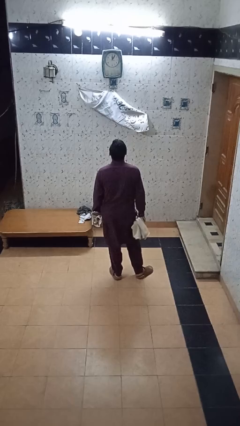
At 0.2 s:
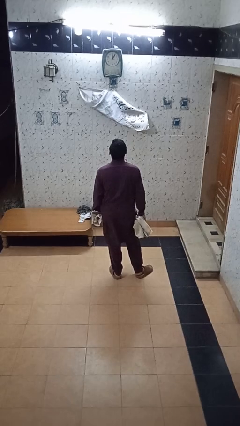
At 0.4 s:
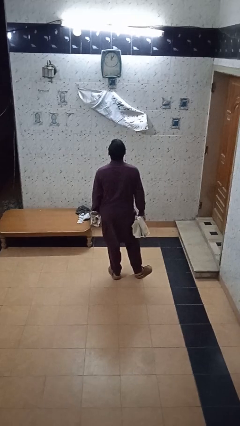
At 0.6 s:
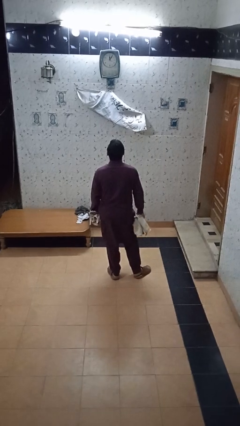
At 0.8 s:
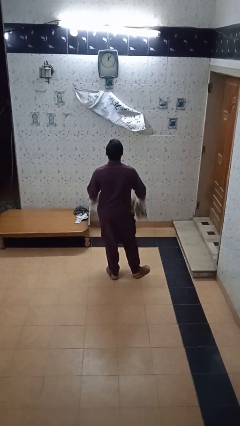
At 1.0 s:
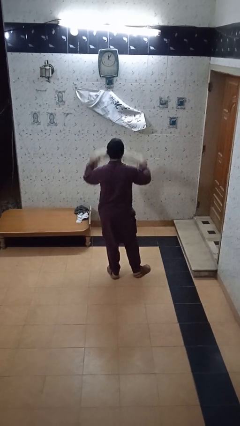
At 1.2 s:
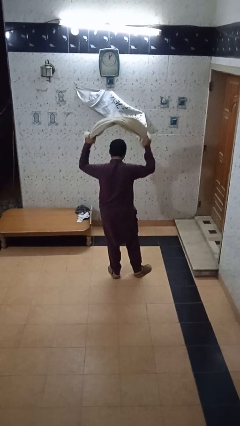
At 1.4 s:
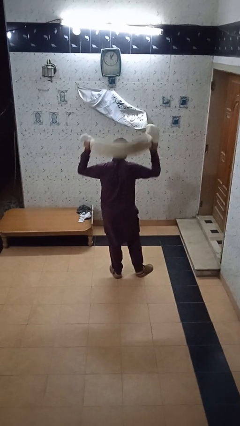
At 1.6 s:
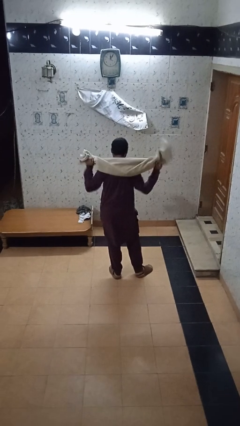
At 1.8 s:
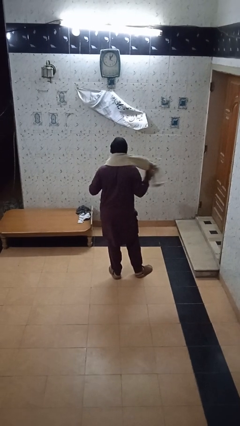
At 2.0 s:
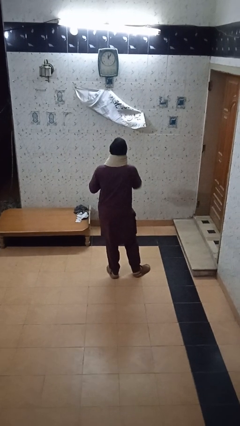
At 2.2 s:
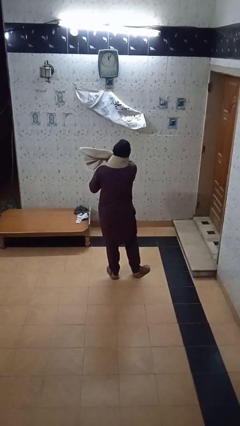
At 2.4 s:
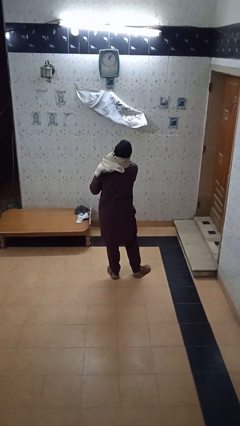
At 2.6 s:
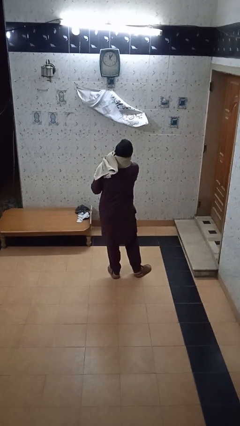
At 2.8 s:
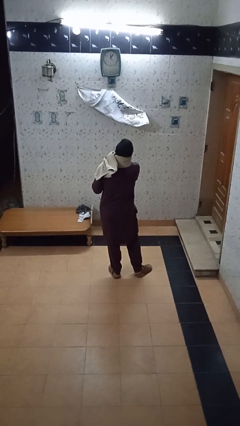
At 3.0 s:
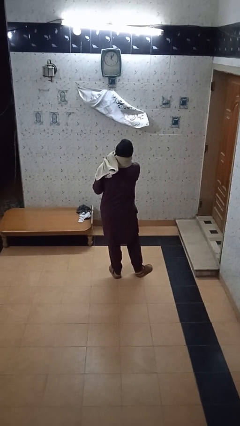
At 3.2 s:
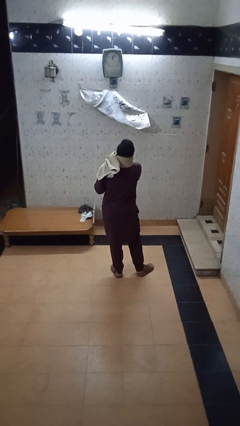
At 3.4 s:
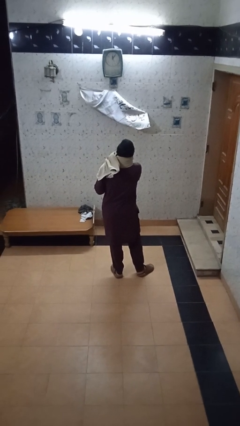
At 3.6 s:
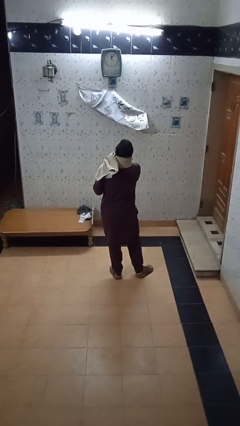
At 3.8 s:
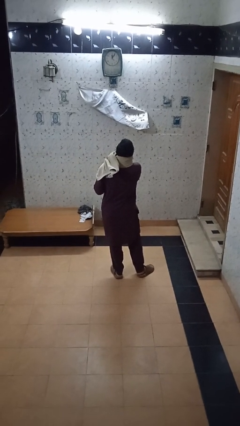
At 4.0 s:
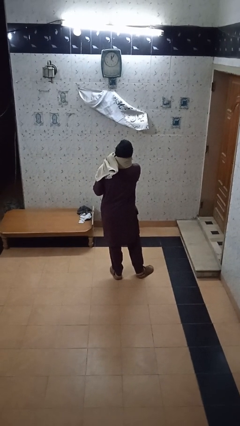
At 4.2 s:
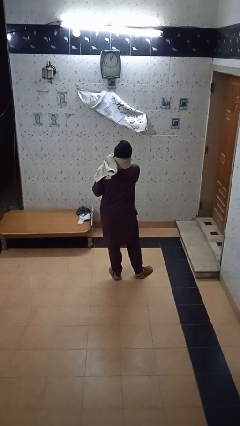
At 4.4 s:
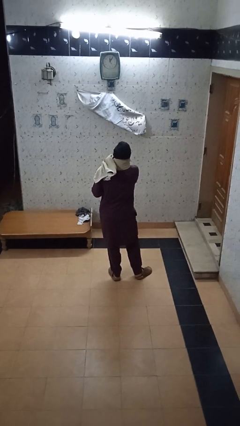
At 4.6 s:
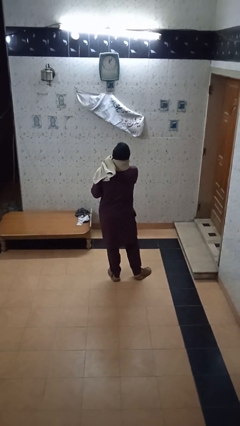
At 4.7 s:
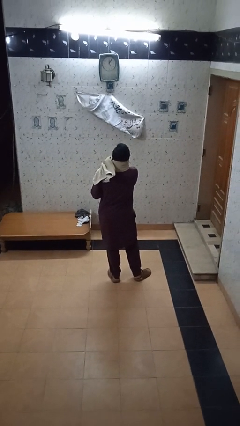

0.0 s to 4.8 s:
person puts on scarf

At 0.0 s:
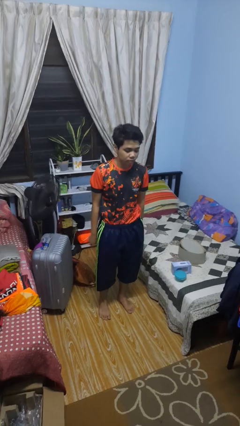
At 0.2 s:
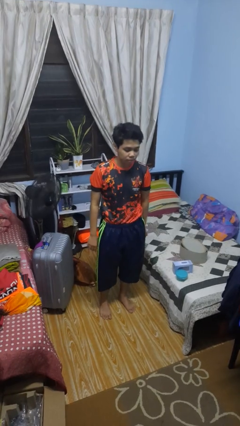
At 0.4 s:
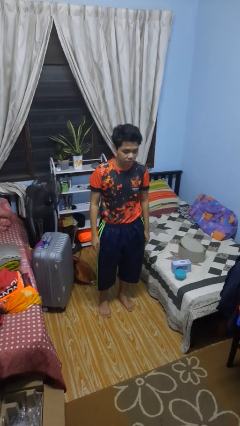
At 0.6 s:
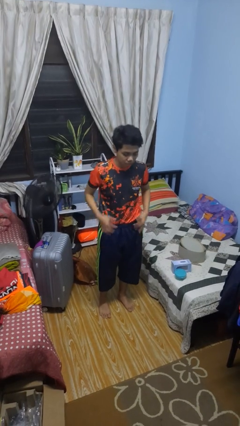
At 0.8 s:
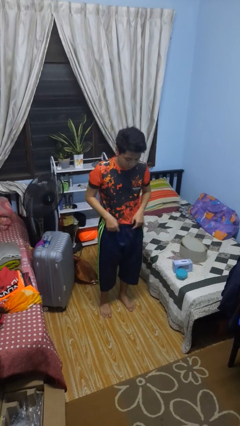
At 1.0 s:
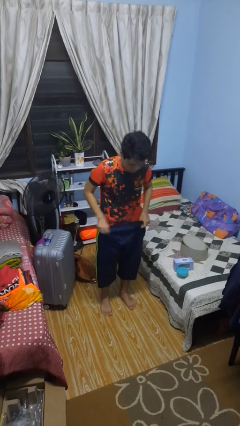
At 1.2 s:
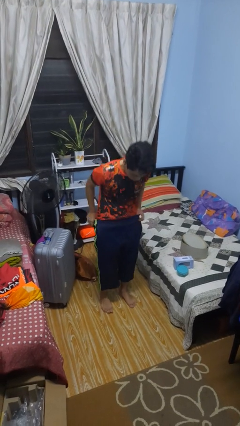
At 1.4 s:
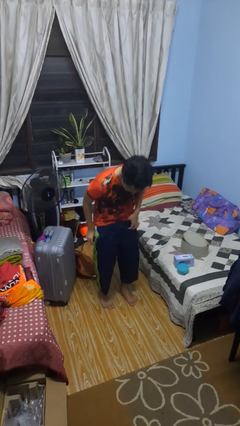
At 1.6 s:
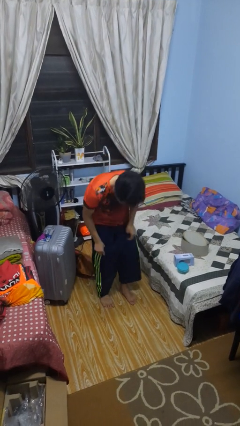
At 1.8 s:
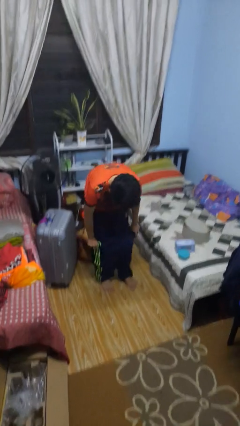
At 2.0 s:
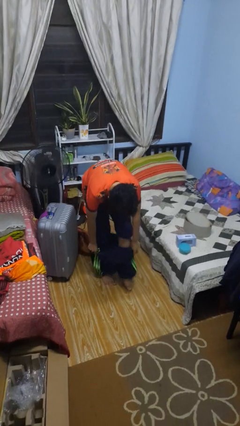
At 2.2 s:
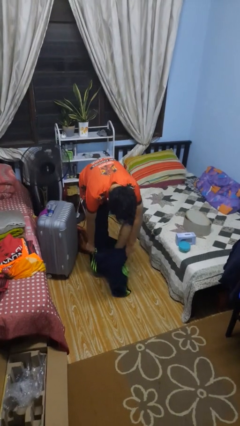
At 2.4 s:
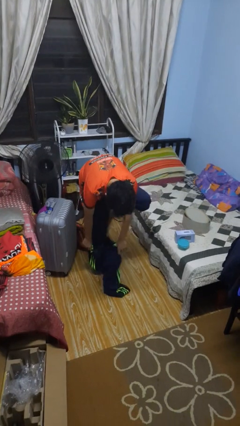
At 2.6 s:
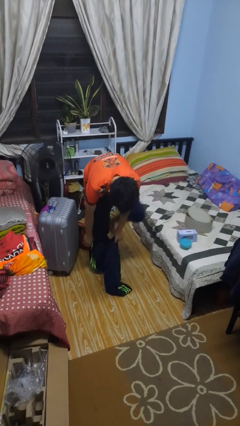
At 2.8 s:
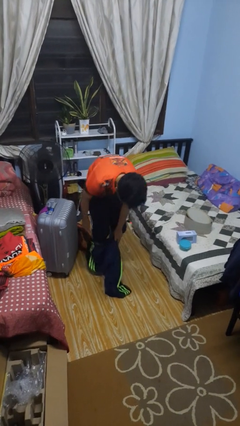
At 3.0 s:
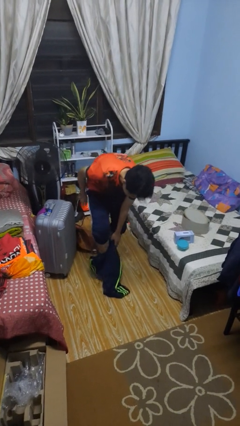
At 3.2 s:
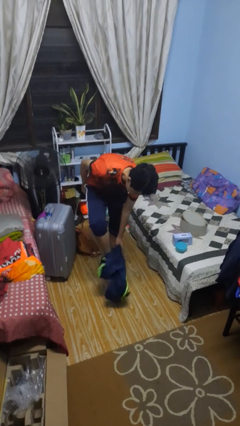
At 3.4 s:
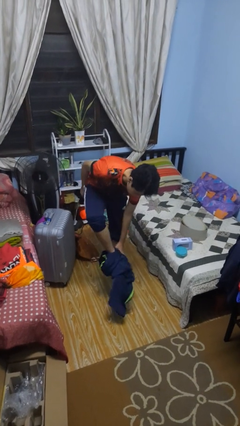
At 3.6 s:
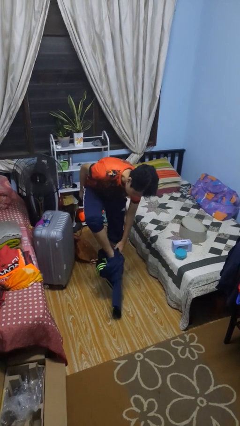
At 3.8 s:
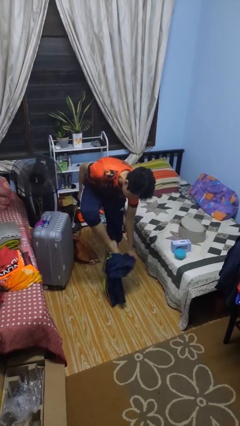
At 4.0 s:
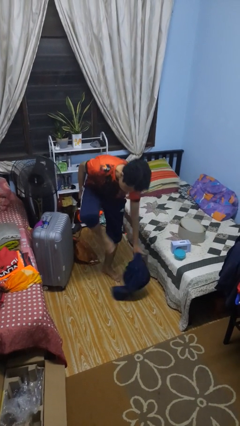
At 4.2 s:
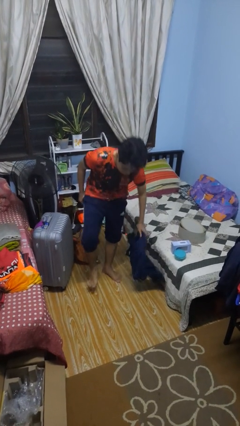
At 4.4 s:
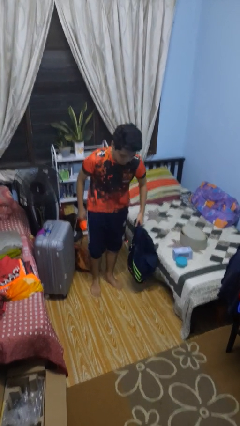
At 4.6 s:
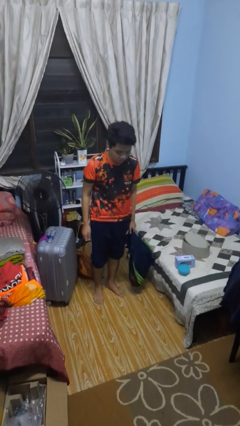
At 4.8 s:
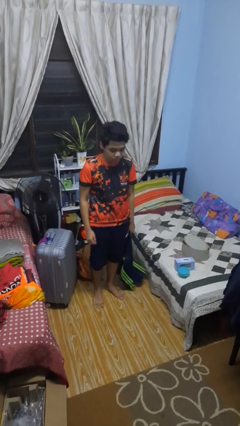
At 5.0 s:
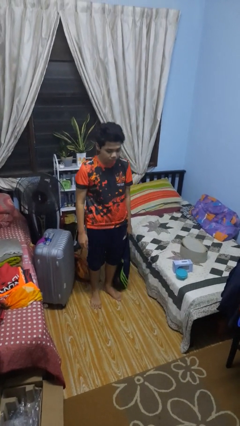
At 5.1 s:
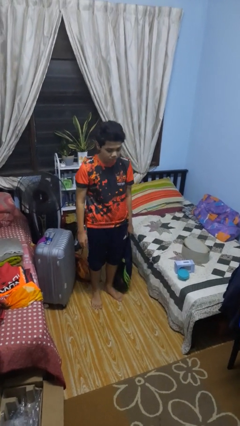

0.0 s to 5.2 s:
person takes off pants

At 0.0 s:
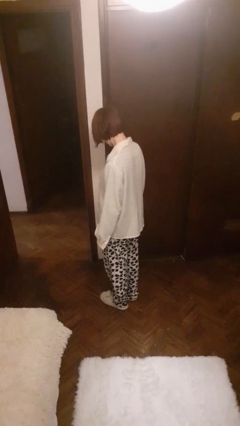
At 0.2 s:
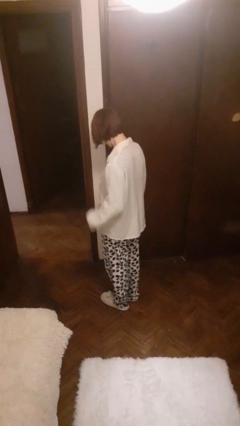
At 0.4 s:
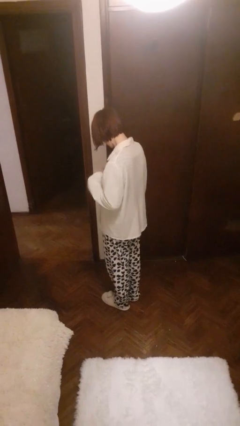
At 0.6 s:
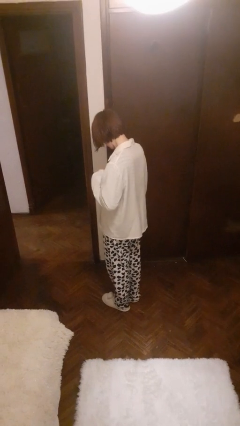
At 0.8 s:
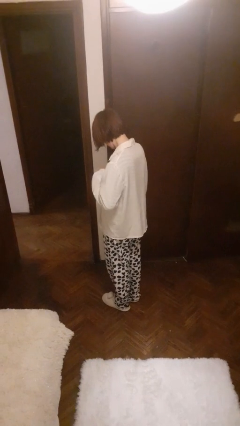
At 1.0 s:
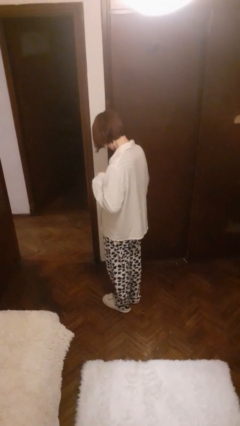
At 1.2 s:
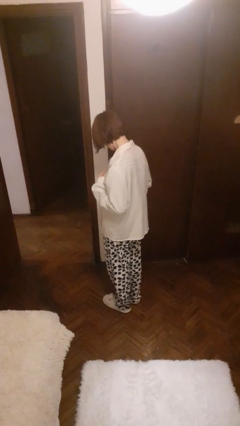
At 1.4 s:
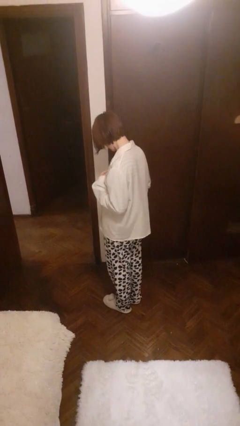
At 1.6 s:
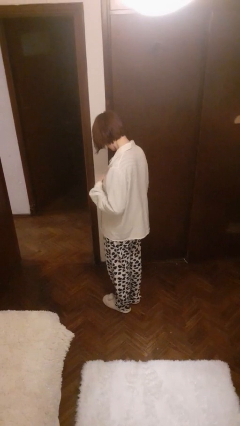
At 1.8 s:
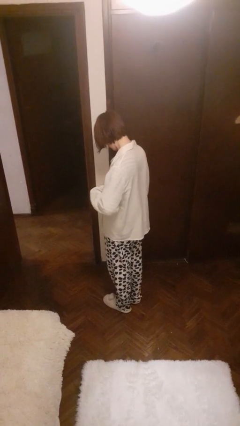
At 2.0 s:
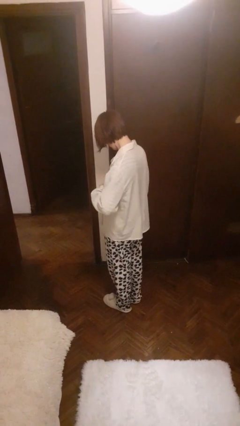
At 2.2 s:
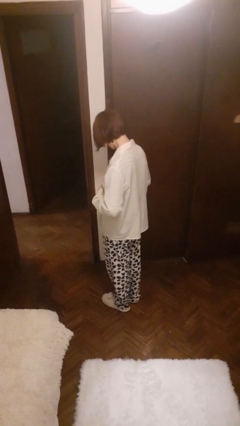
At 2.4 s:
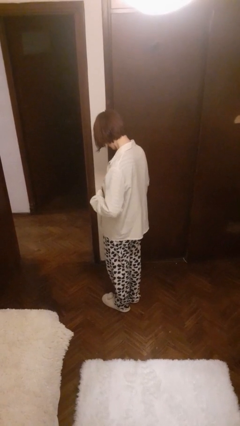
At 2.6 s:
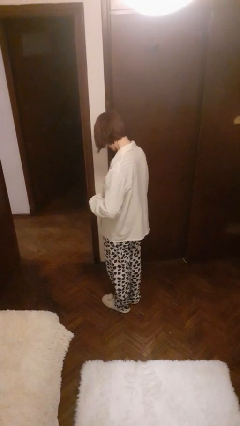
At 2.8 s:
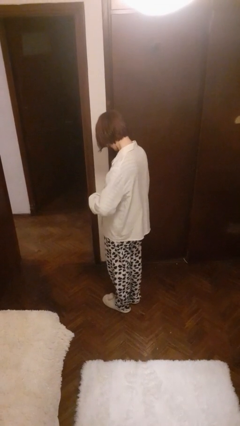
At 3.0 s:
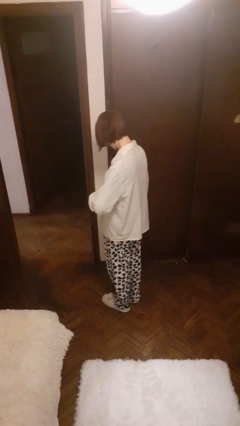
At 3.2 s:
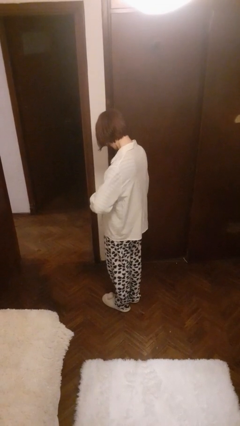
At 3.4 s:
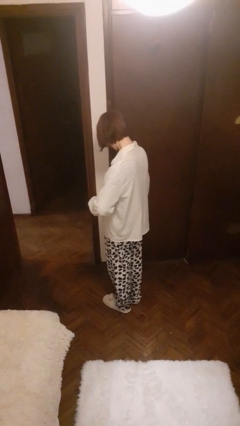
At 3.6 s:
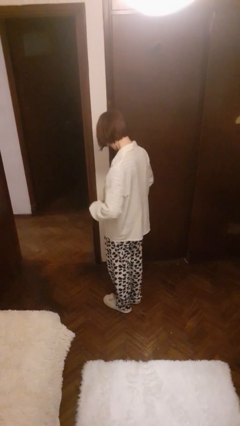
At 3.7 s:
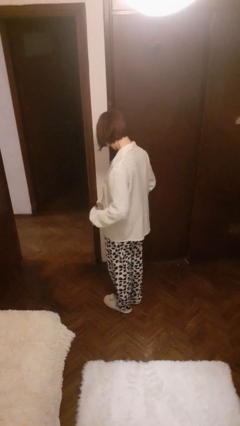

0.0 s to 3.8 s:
person unbuttons shirt

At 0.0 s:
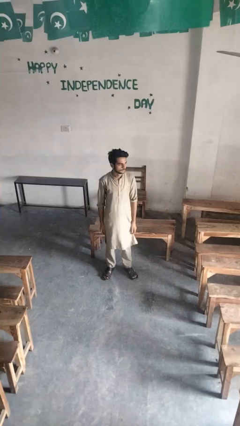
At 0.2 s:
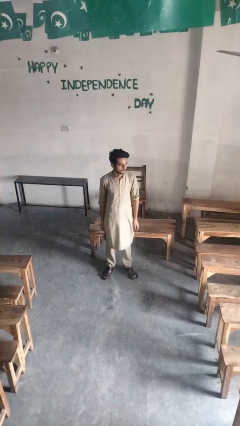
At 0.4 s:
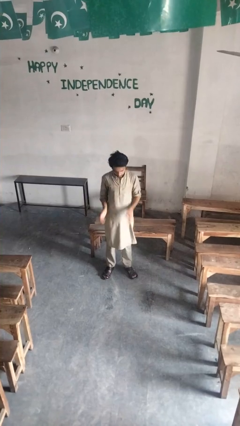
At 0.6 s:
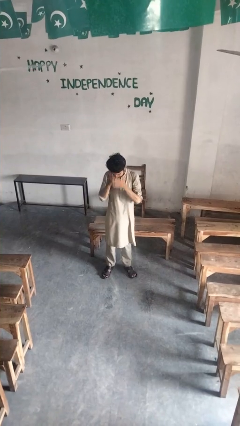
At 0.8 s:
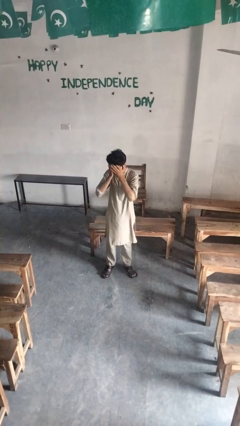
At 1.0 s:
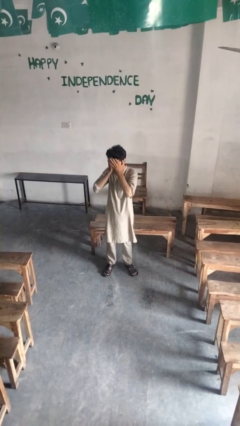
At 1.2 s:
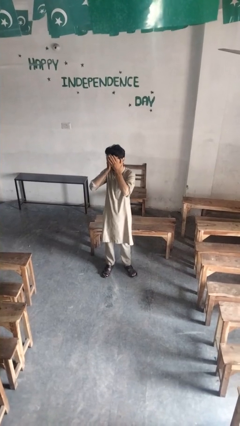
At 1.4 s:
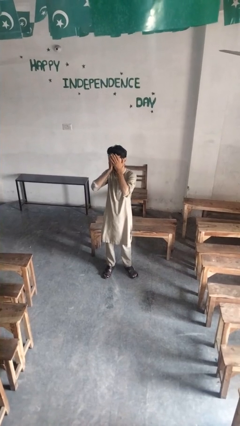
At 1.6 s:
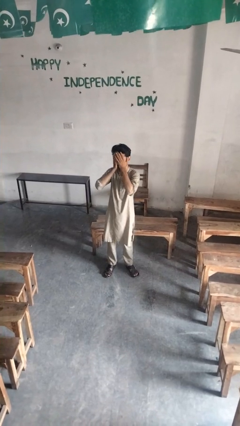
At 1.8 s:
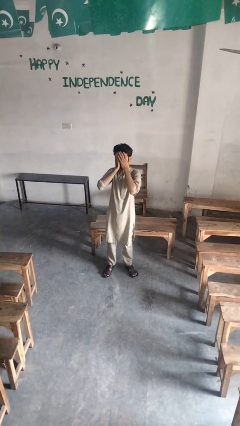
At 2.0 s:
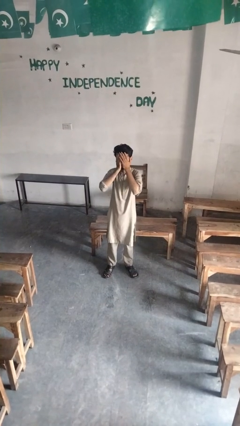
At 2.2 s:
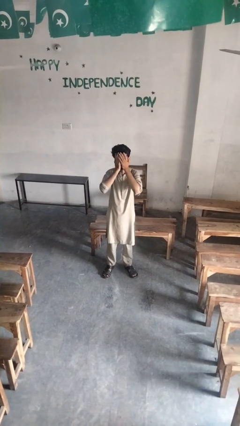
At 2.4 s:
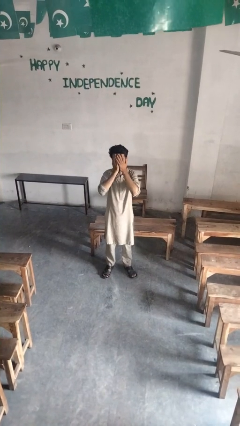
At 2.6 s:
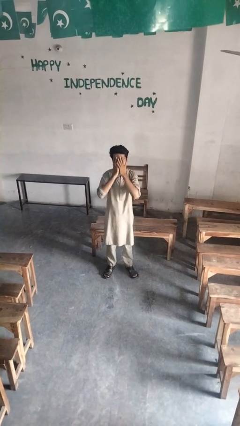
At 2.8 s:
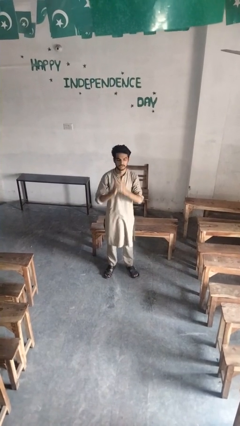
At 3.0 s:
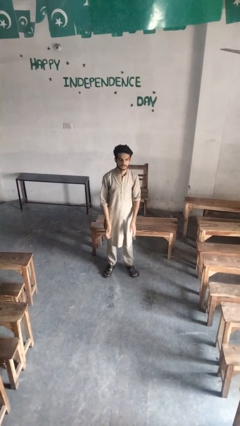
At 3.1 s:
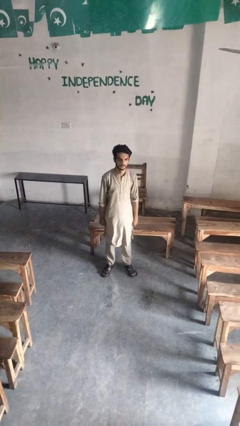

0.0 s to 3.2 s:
person covers face with hands

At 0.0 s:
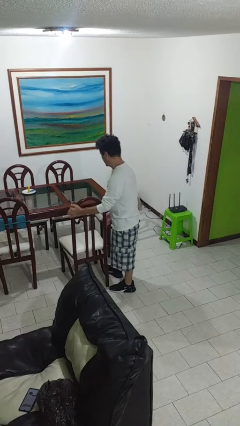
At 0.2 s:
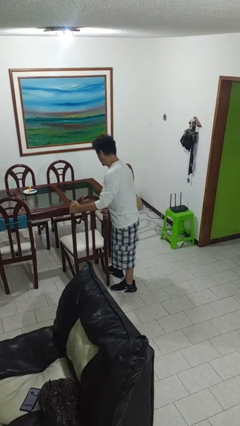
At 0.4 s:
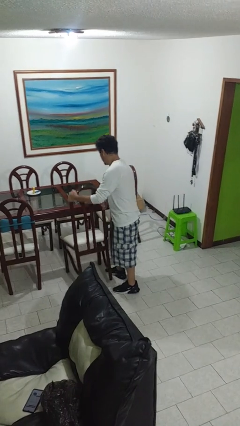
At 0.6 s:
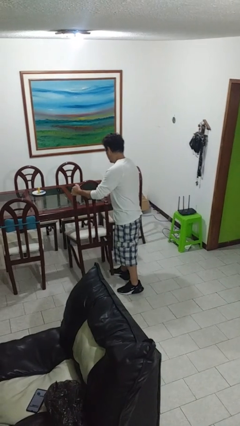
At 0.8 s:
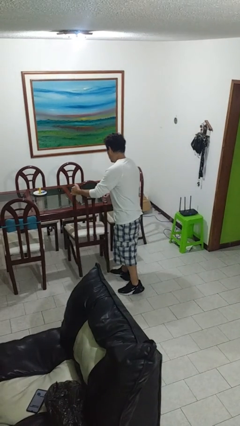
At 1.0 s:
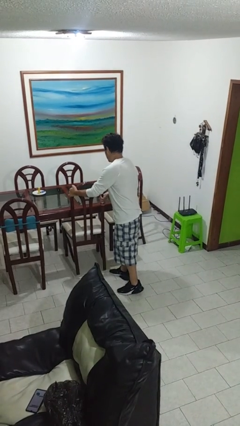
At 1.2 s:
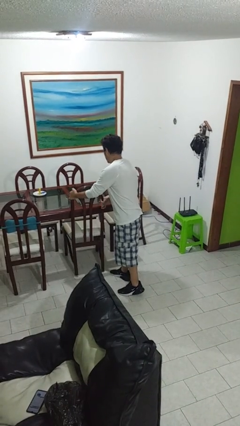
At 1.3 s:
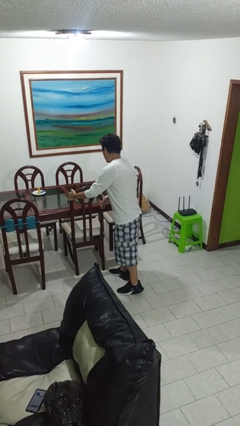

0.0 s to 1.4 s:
person pushes in chair
